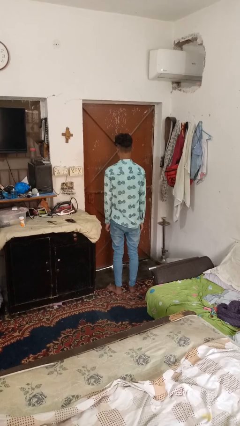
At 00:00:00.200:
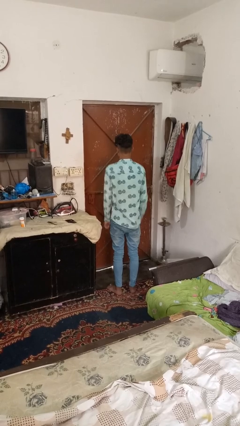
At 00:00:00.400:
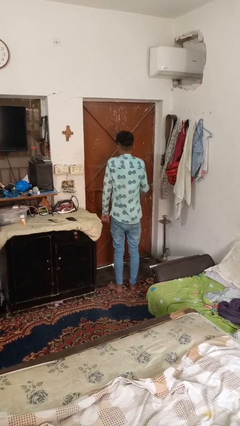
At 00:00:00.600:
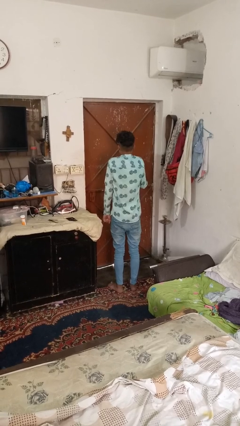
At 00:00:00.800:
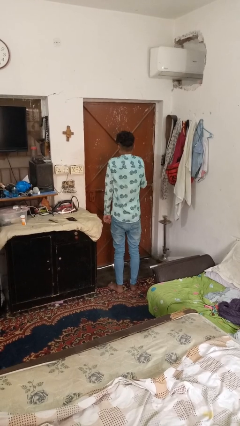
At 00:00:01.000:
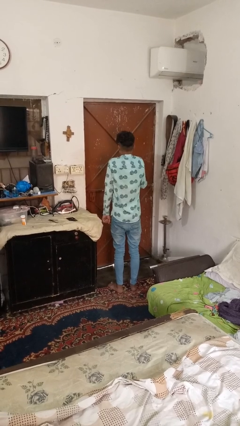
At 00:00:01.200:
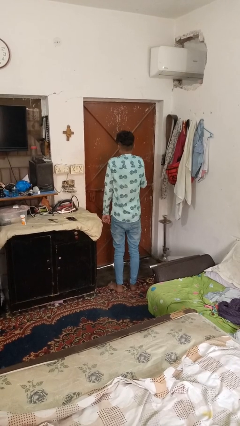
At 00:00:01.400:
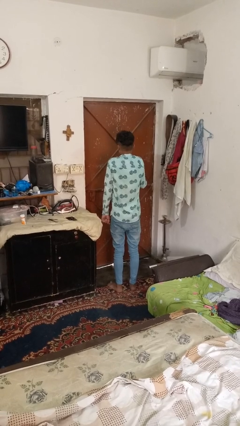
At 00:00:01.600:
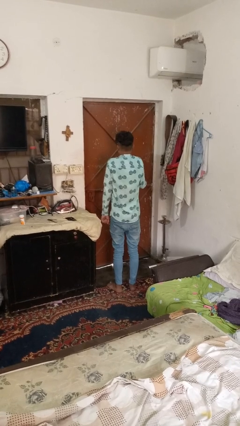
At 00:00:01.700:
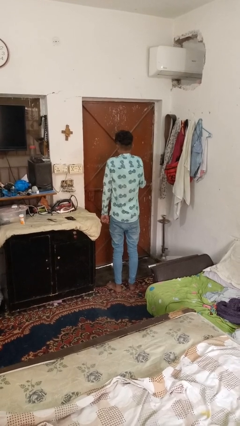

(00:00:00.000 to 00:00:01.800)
person shrugs

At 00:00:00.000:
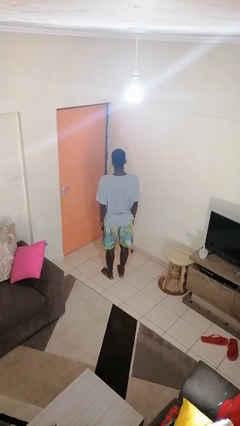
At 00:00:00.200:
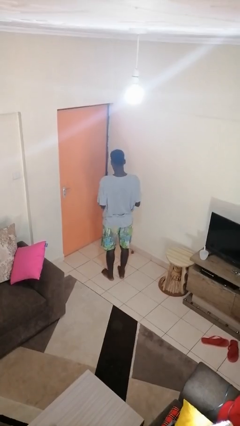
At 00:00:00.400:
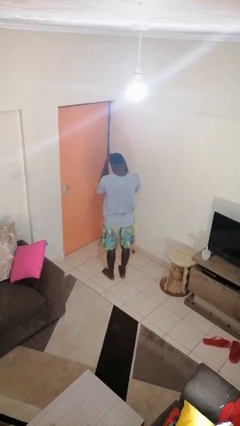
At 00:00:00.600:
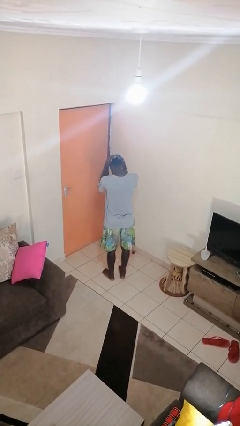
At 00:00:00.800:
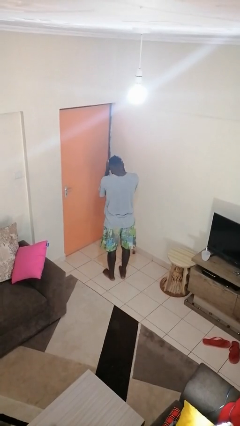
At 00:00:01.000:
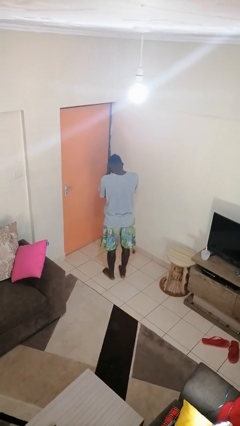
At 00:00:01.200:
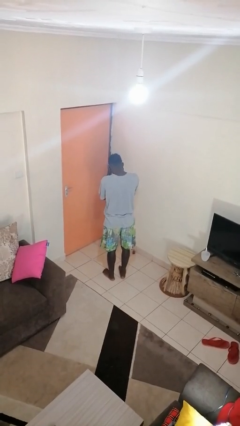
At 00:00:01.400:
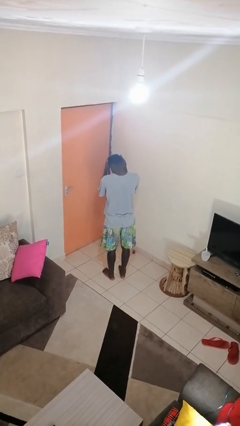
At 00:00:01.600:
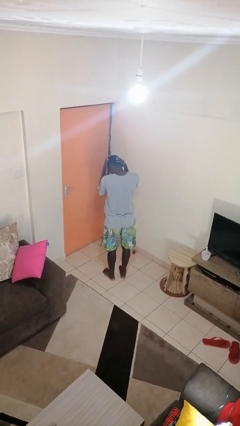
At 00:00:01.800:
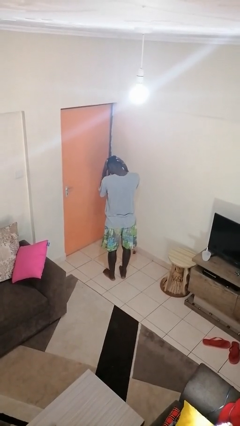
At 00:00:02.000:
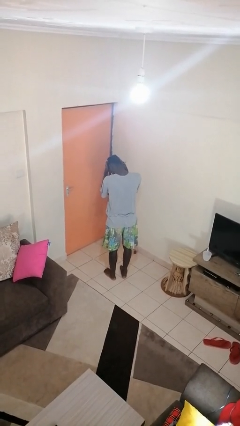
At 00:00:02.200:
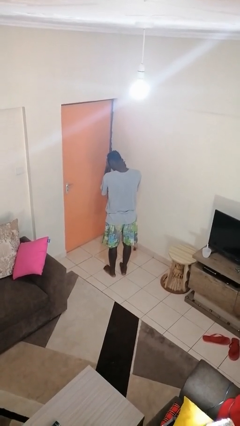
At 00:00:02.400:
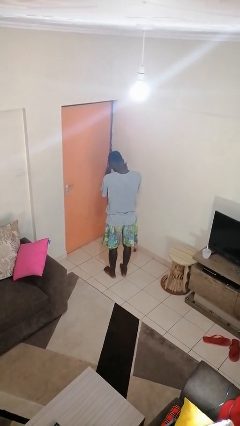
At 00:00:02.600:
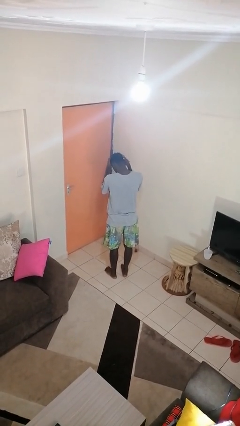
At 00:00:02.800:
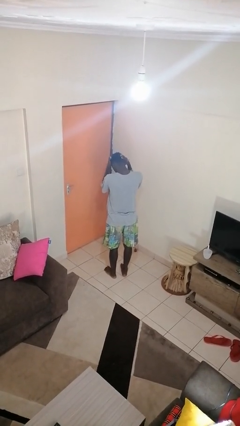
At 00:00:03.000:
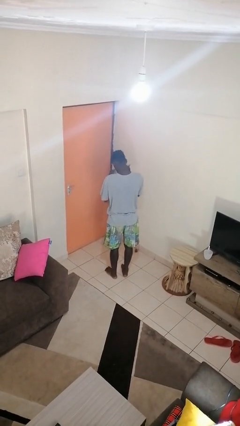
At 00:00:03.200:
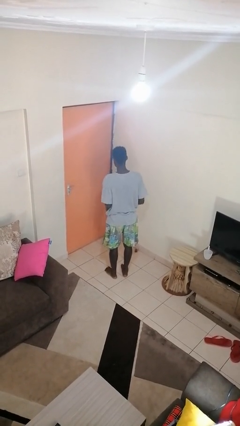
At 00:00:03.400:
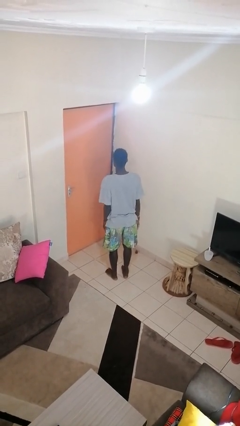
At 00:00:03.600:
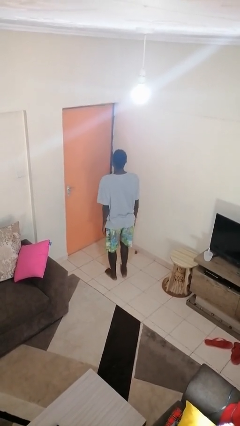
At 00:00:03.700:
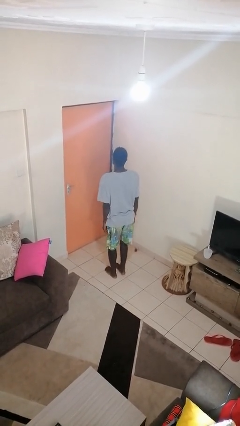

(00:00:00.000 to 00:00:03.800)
person strokes hair

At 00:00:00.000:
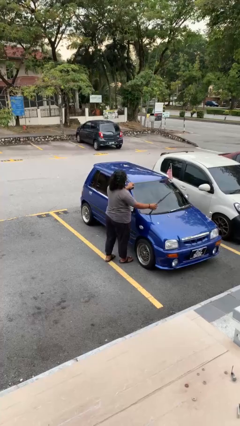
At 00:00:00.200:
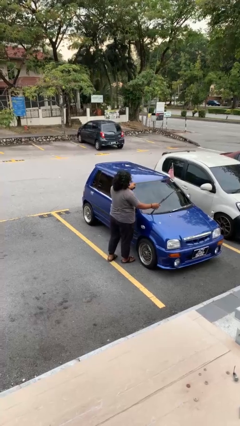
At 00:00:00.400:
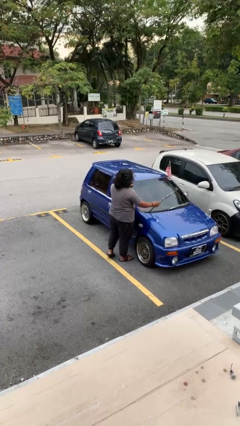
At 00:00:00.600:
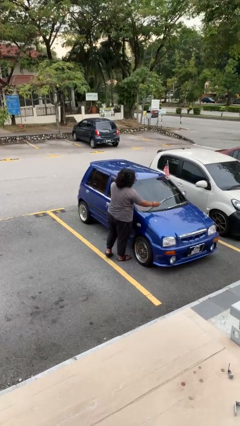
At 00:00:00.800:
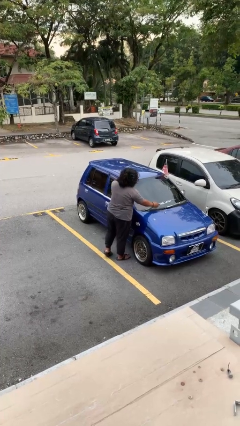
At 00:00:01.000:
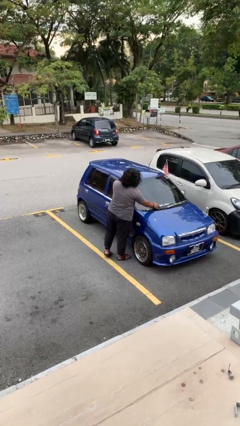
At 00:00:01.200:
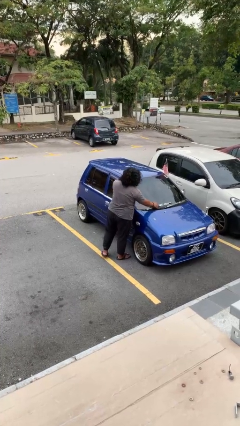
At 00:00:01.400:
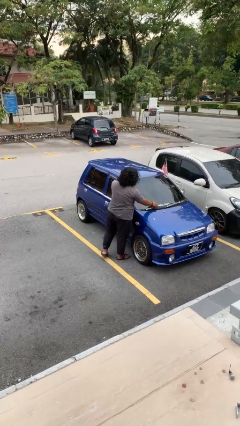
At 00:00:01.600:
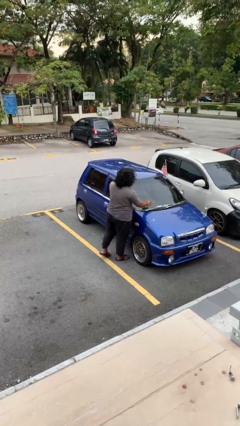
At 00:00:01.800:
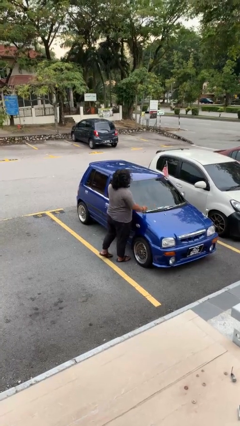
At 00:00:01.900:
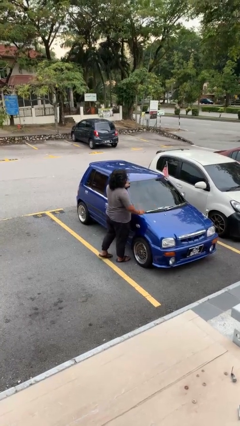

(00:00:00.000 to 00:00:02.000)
person flips down car wipers

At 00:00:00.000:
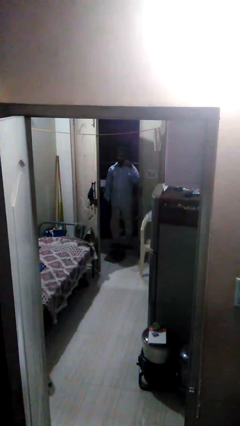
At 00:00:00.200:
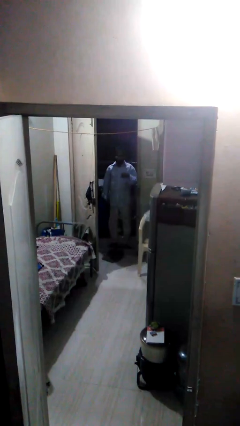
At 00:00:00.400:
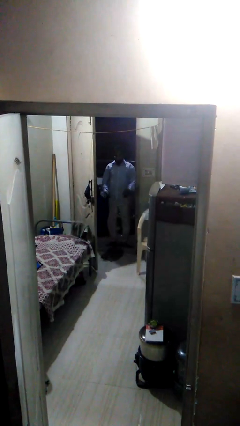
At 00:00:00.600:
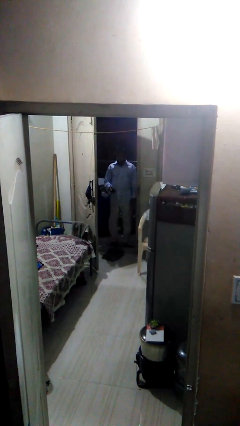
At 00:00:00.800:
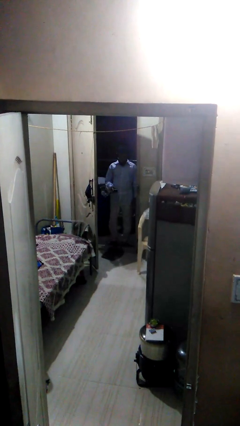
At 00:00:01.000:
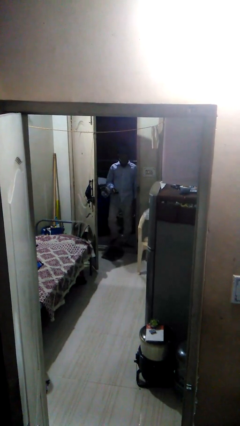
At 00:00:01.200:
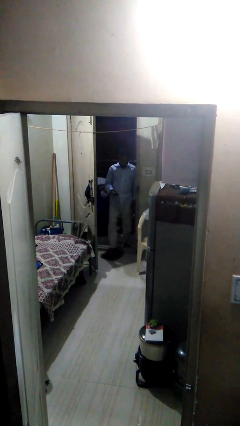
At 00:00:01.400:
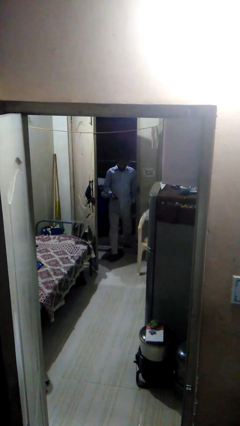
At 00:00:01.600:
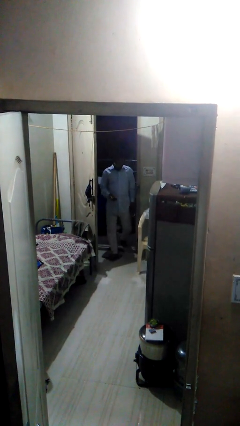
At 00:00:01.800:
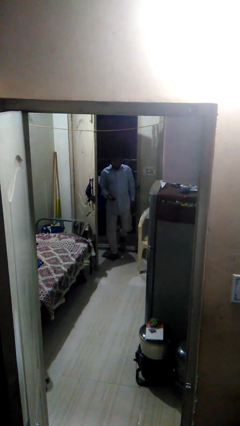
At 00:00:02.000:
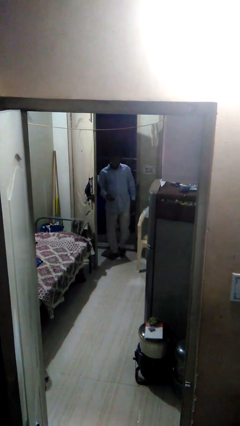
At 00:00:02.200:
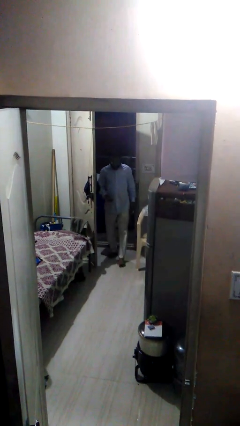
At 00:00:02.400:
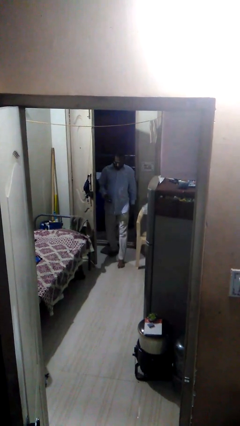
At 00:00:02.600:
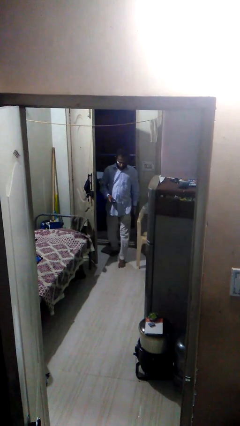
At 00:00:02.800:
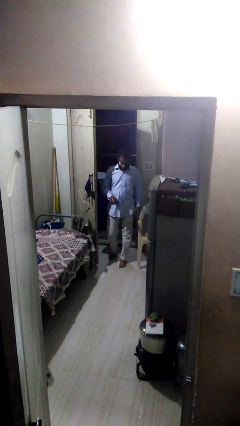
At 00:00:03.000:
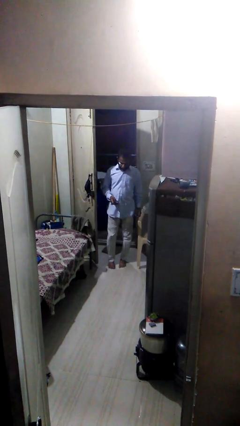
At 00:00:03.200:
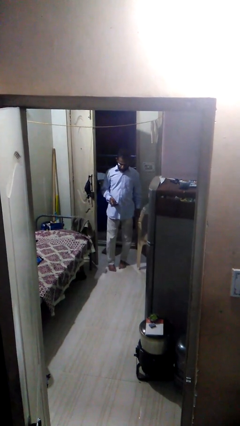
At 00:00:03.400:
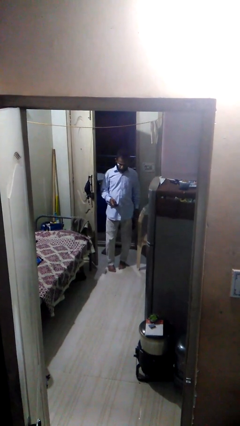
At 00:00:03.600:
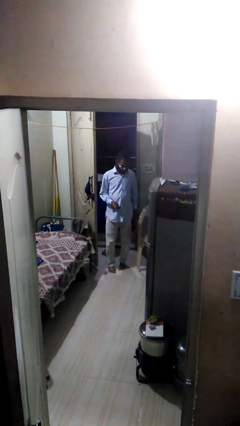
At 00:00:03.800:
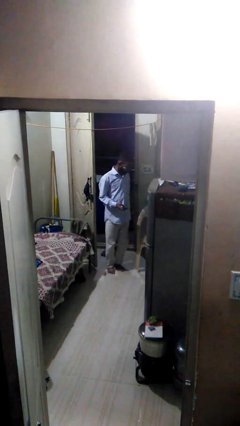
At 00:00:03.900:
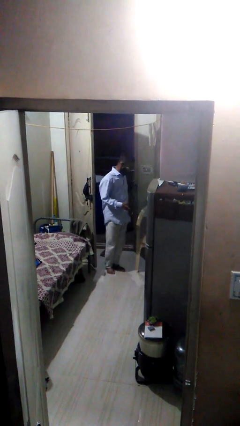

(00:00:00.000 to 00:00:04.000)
person enters scene through structure

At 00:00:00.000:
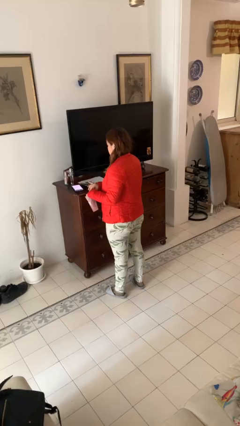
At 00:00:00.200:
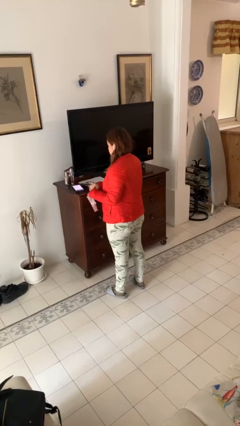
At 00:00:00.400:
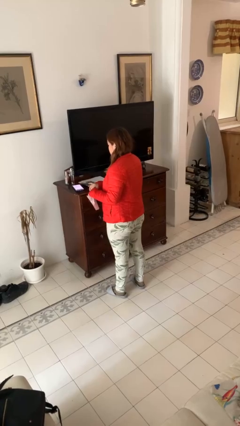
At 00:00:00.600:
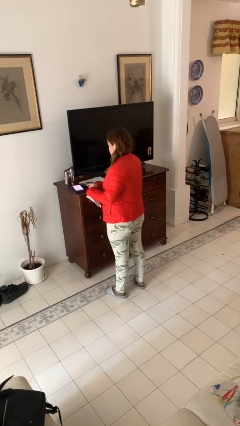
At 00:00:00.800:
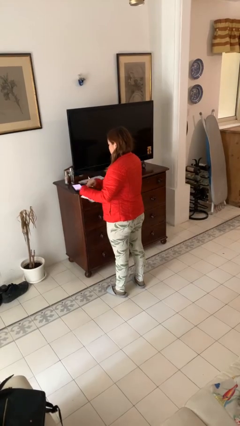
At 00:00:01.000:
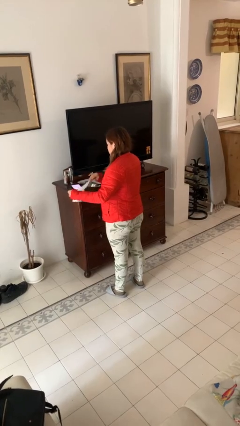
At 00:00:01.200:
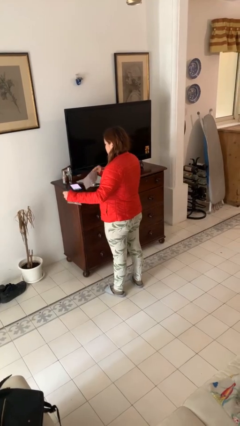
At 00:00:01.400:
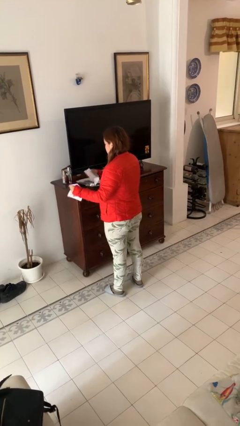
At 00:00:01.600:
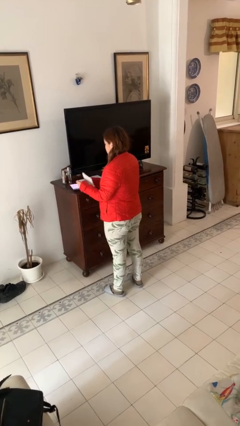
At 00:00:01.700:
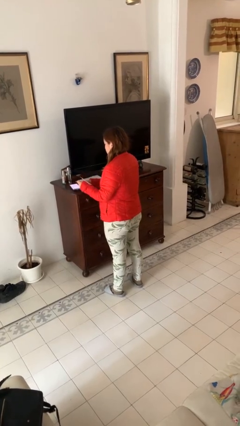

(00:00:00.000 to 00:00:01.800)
person tears paper

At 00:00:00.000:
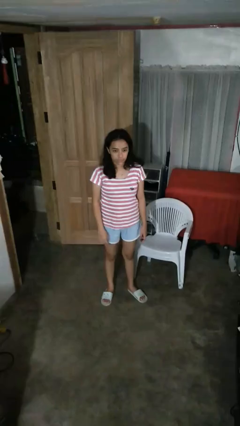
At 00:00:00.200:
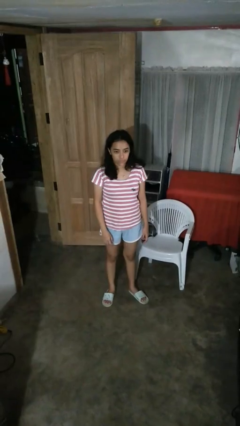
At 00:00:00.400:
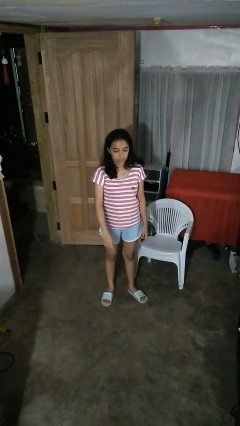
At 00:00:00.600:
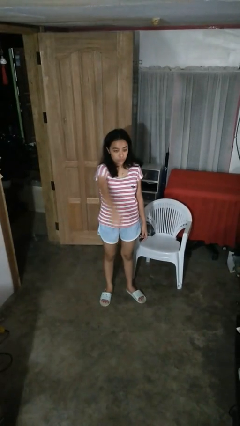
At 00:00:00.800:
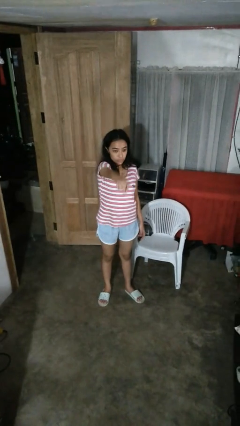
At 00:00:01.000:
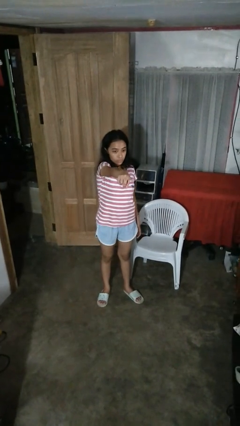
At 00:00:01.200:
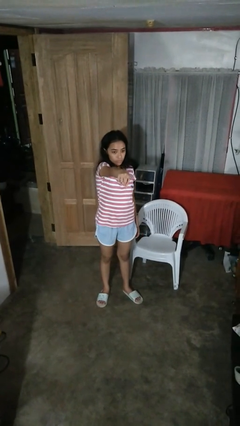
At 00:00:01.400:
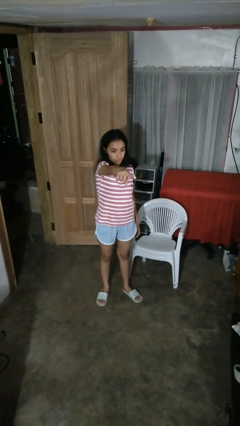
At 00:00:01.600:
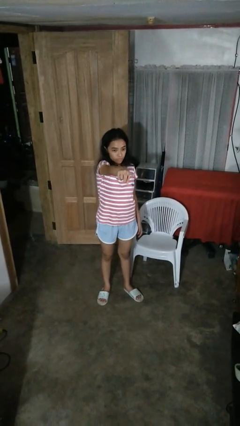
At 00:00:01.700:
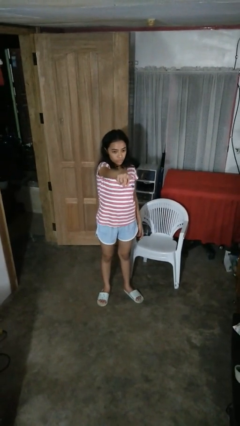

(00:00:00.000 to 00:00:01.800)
person points at person

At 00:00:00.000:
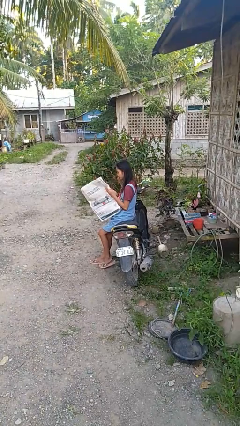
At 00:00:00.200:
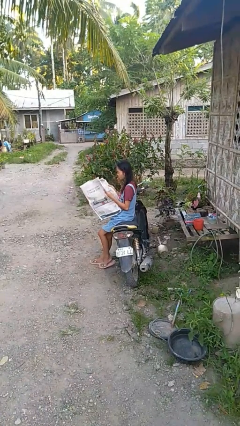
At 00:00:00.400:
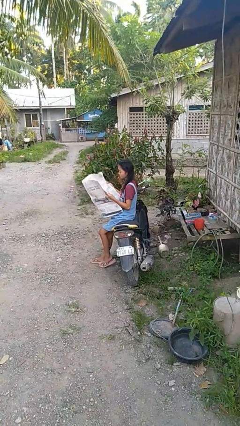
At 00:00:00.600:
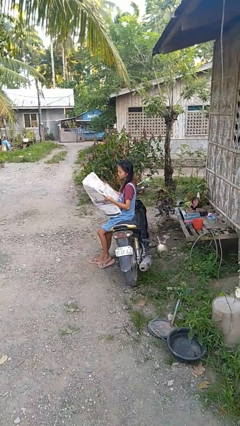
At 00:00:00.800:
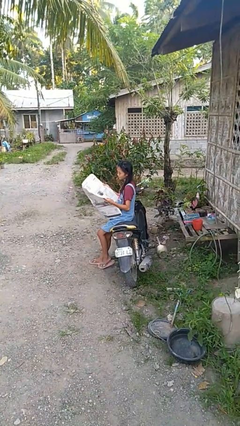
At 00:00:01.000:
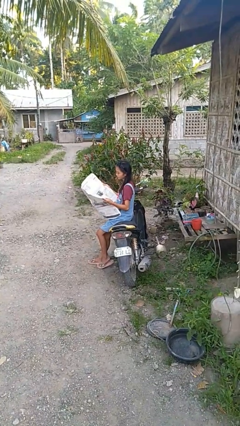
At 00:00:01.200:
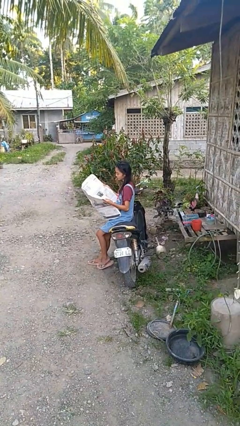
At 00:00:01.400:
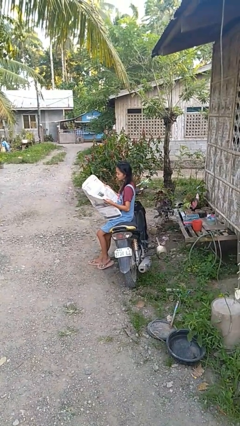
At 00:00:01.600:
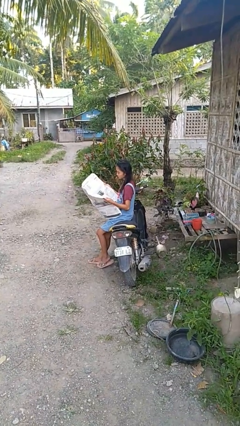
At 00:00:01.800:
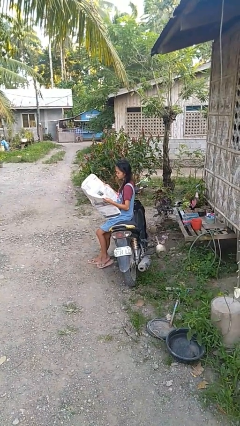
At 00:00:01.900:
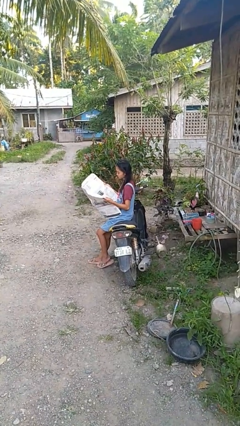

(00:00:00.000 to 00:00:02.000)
person reads newspaper
